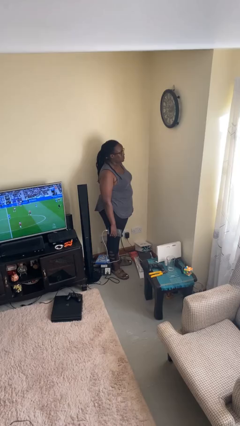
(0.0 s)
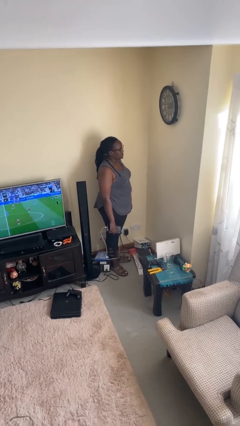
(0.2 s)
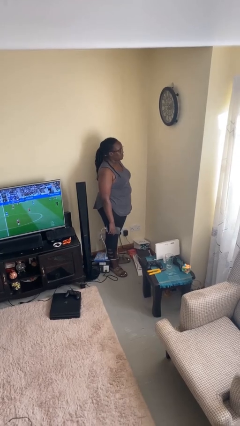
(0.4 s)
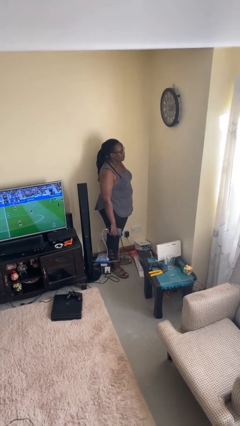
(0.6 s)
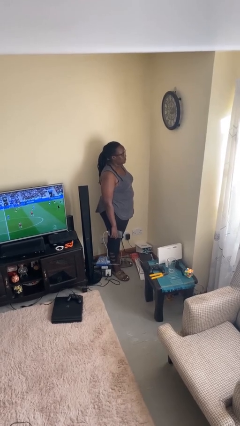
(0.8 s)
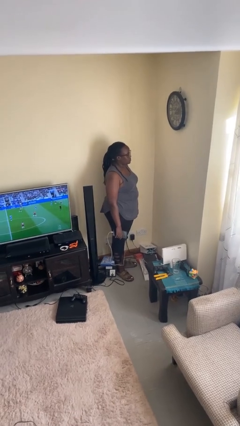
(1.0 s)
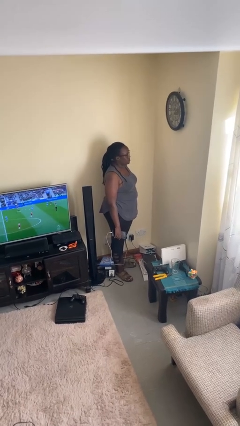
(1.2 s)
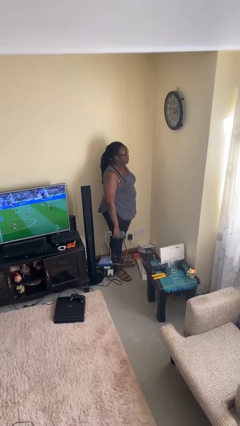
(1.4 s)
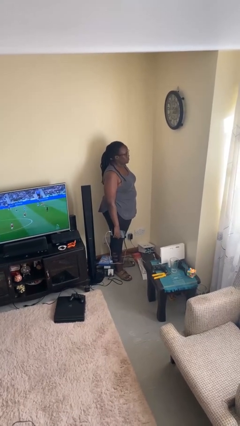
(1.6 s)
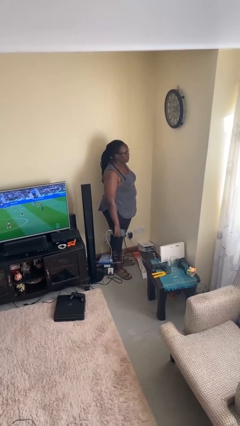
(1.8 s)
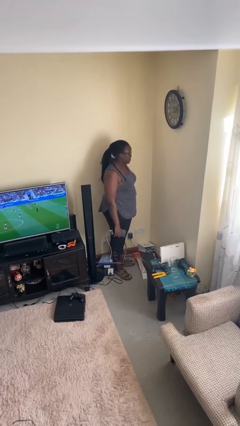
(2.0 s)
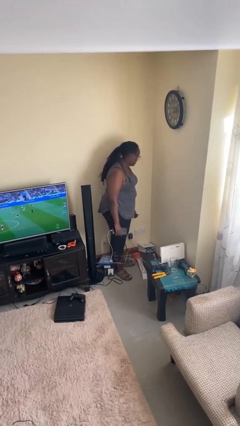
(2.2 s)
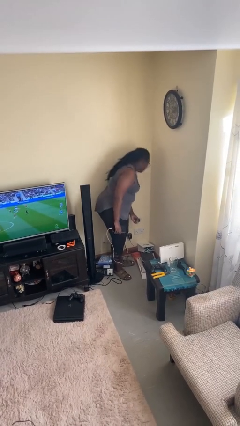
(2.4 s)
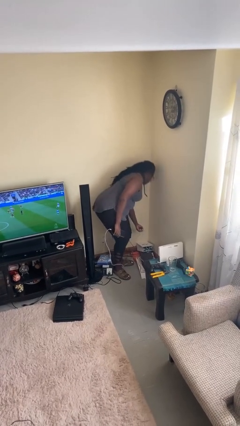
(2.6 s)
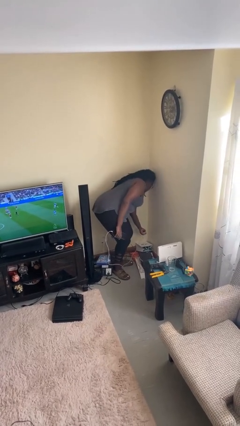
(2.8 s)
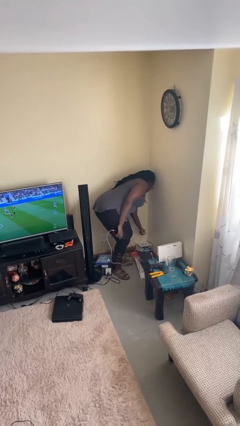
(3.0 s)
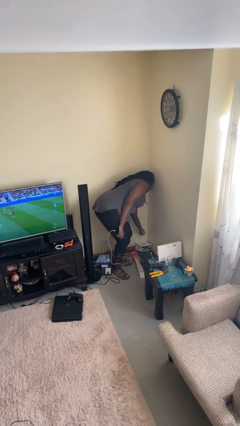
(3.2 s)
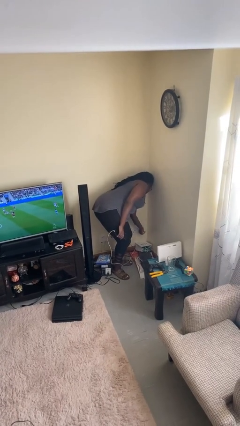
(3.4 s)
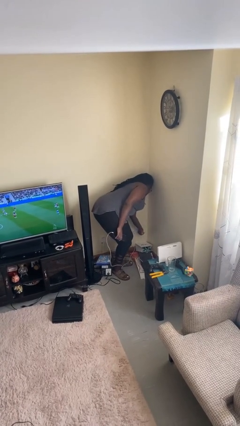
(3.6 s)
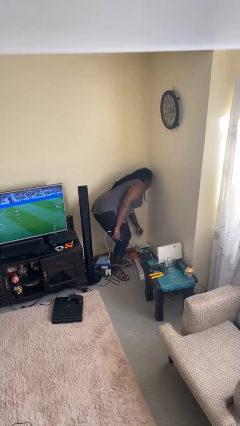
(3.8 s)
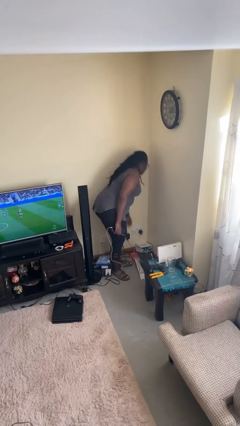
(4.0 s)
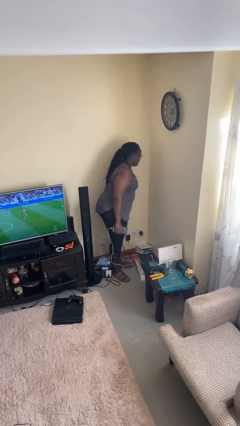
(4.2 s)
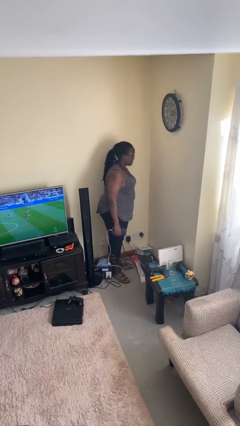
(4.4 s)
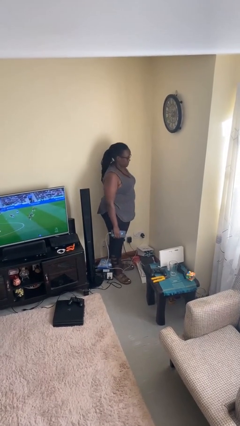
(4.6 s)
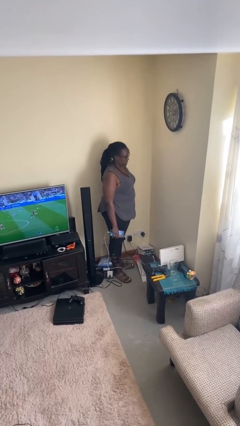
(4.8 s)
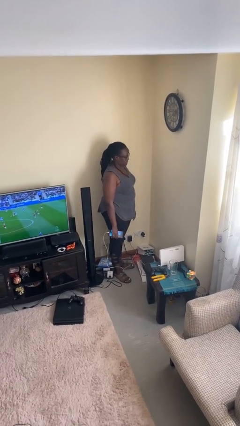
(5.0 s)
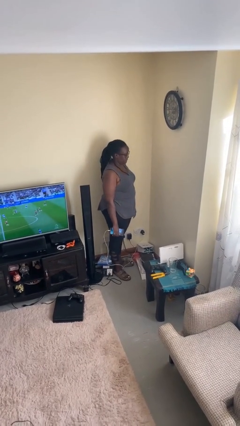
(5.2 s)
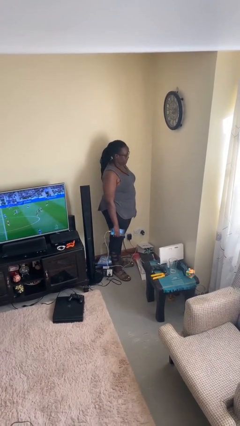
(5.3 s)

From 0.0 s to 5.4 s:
person plugs into electrical socket

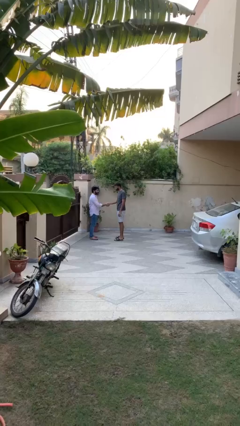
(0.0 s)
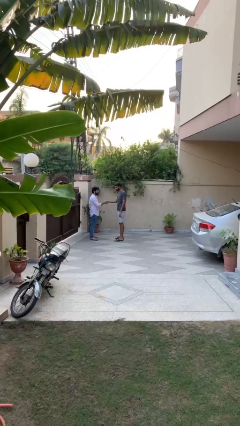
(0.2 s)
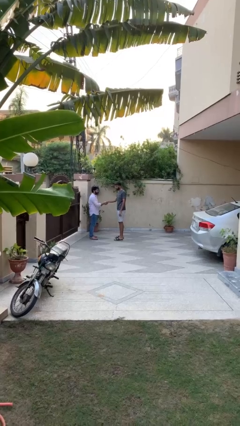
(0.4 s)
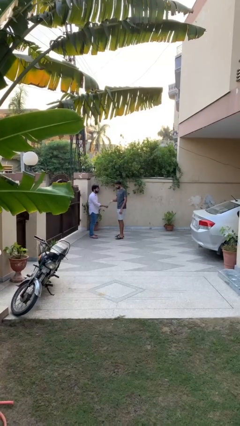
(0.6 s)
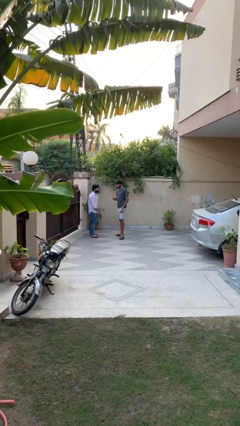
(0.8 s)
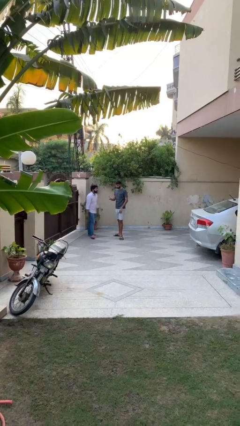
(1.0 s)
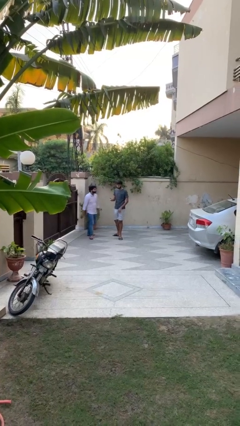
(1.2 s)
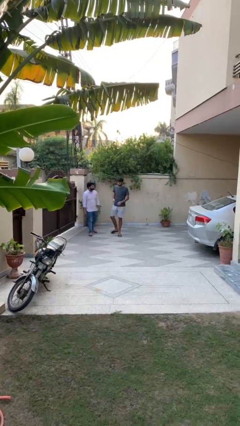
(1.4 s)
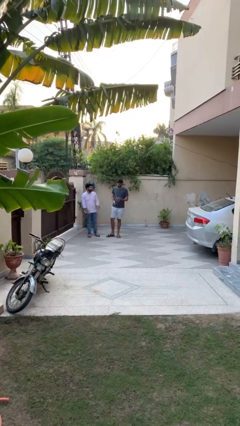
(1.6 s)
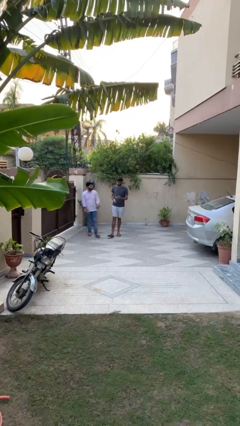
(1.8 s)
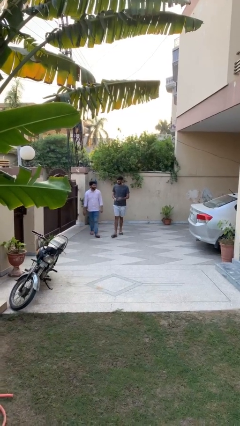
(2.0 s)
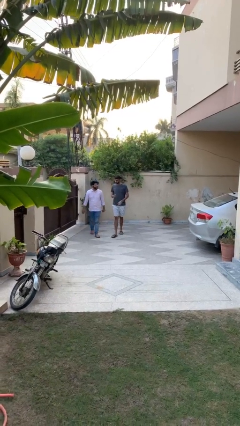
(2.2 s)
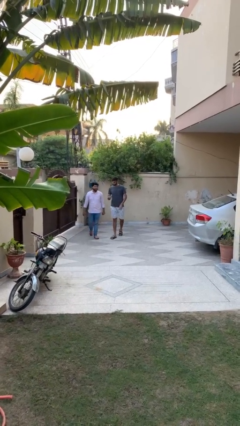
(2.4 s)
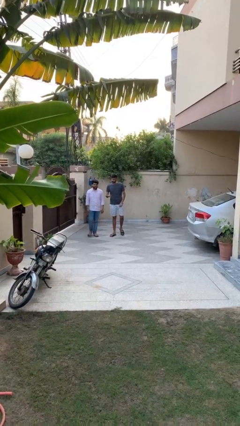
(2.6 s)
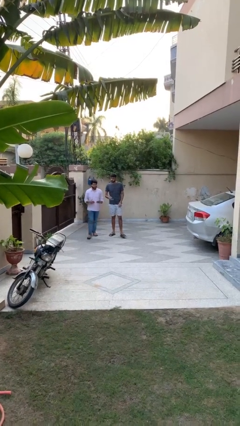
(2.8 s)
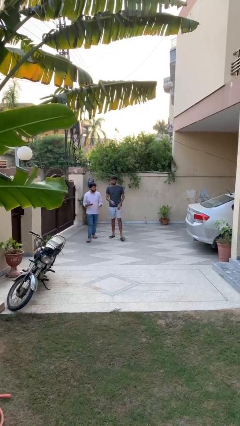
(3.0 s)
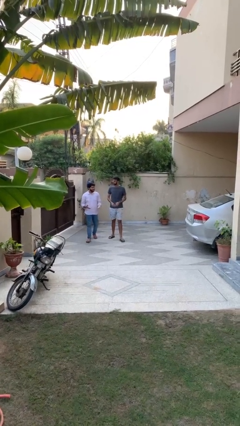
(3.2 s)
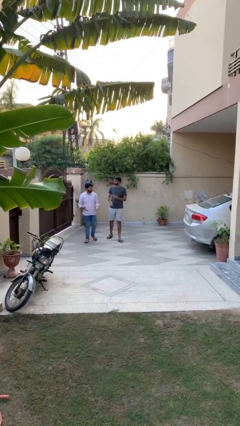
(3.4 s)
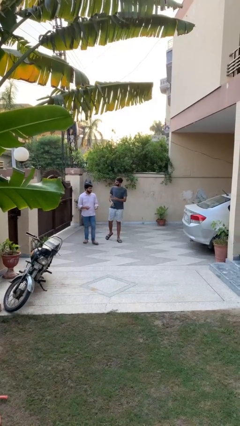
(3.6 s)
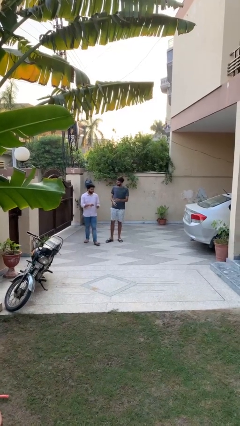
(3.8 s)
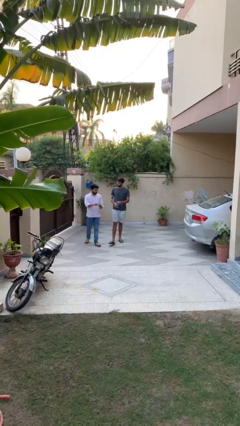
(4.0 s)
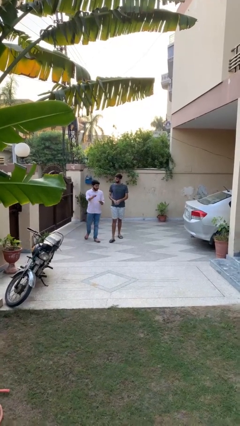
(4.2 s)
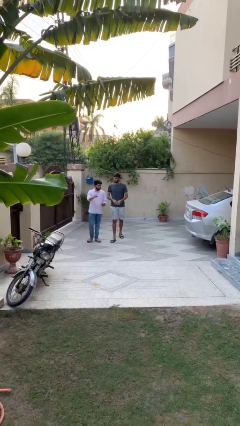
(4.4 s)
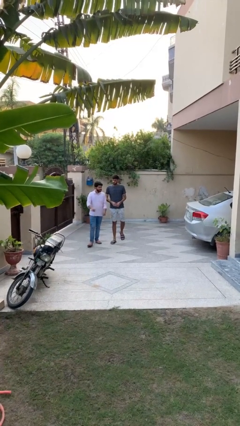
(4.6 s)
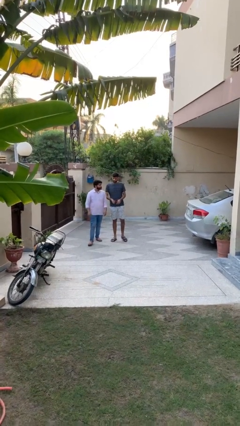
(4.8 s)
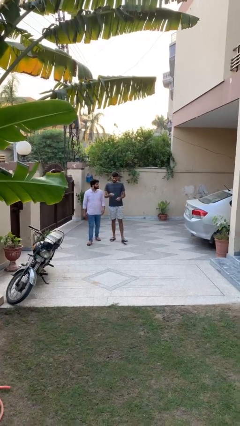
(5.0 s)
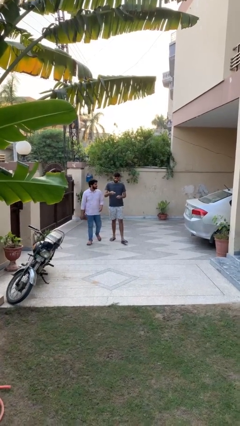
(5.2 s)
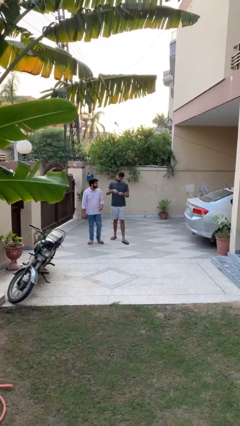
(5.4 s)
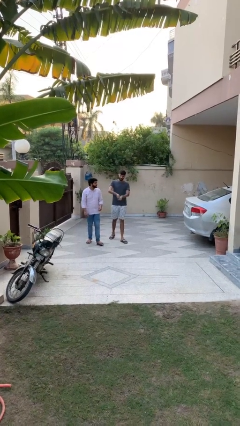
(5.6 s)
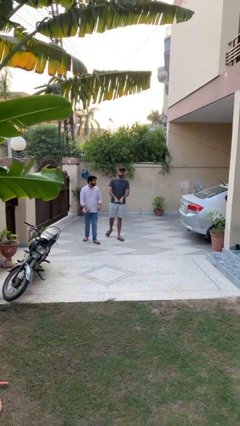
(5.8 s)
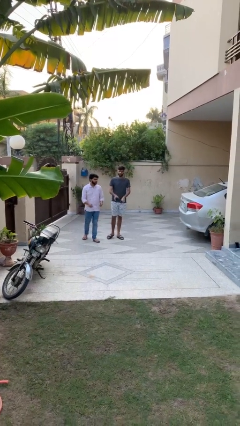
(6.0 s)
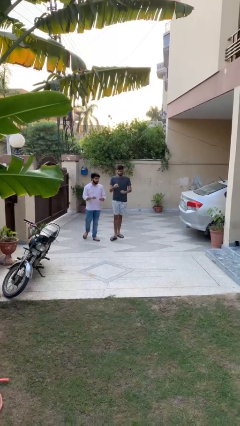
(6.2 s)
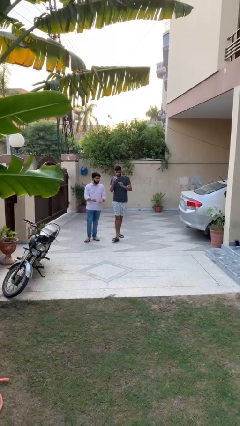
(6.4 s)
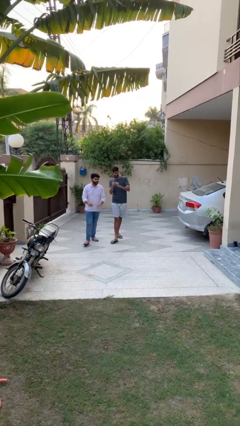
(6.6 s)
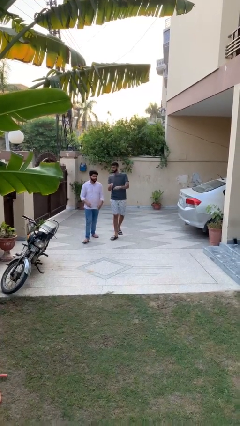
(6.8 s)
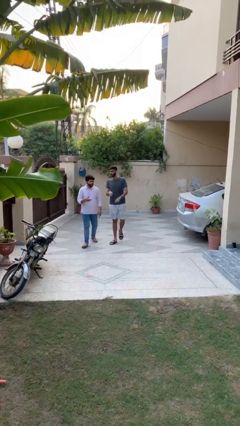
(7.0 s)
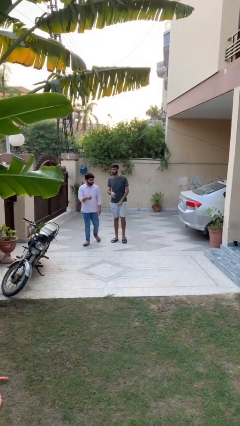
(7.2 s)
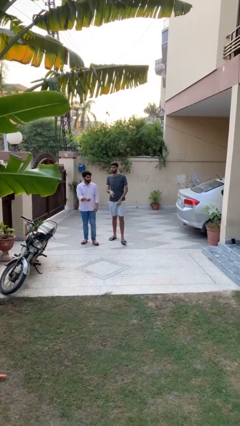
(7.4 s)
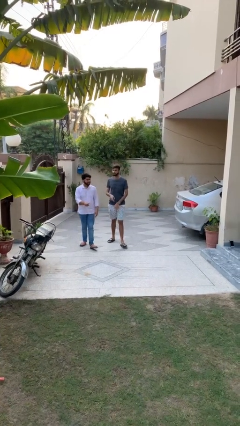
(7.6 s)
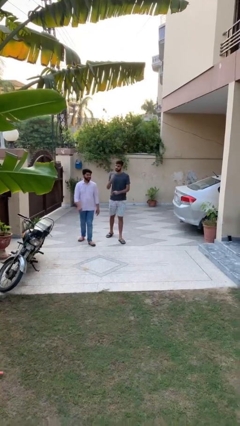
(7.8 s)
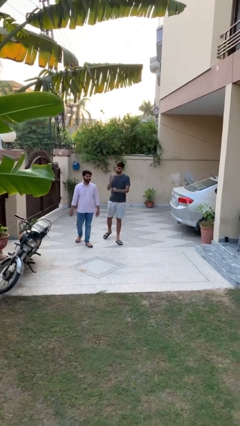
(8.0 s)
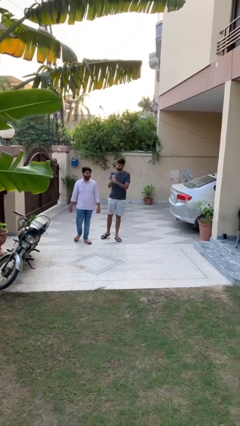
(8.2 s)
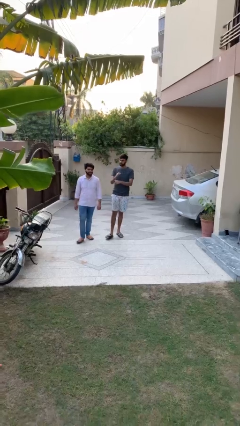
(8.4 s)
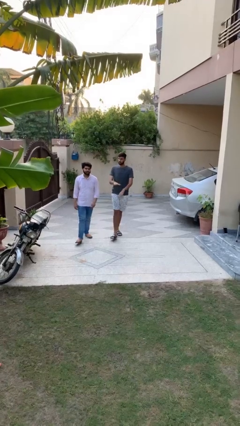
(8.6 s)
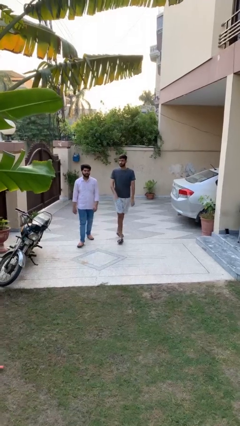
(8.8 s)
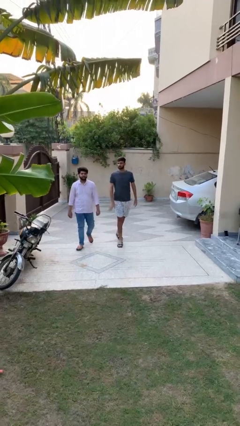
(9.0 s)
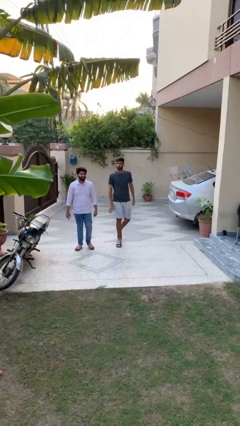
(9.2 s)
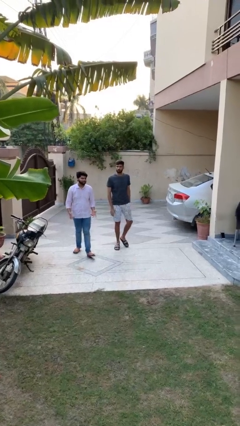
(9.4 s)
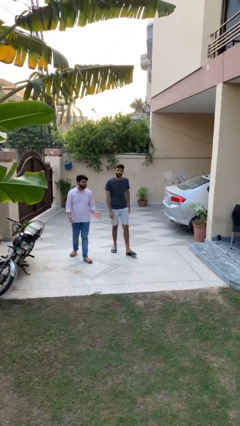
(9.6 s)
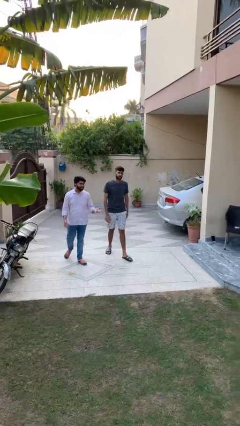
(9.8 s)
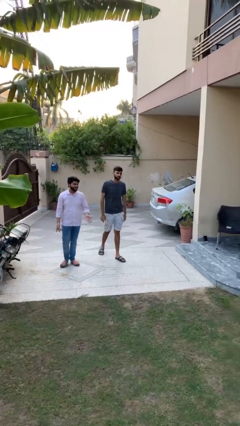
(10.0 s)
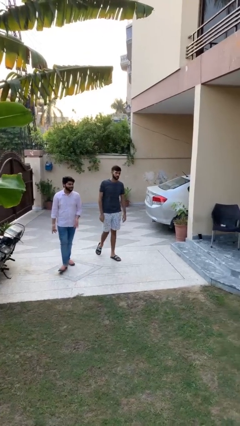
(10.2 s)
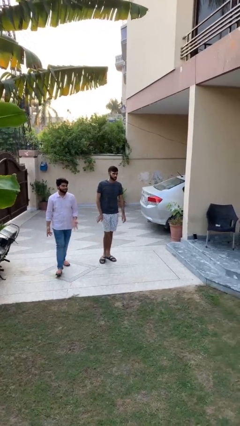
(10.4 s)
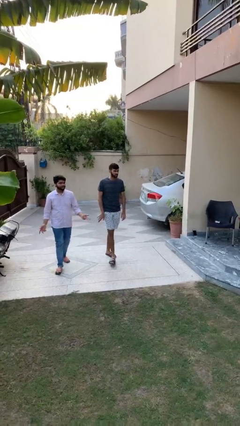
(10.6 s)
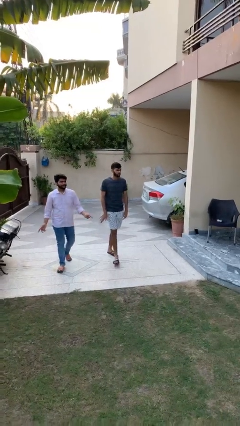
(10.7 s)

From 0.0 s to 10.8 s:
person talks to person

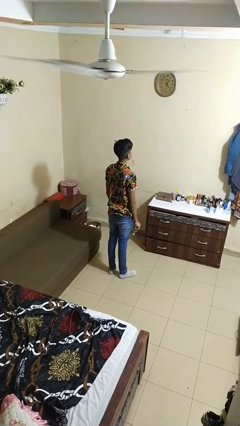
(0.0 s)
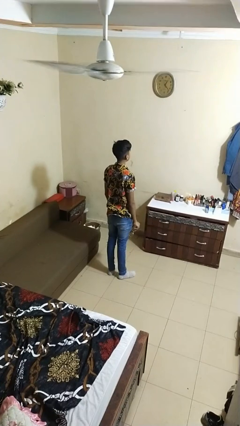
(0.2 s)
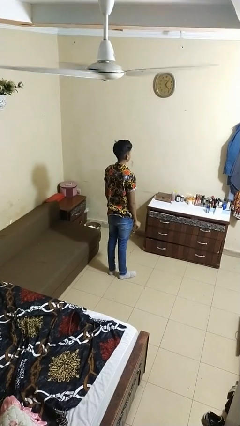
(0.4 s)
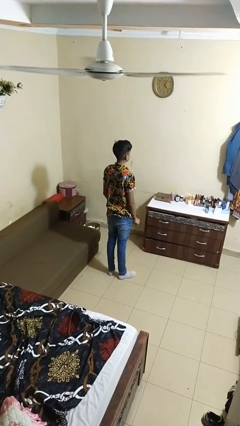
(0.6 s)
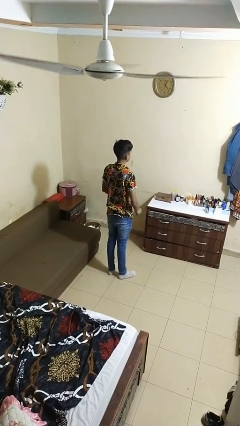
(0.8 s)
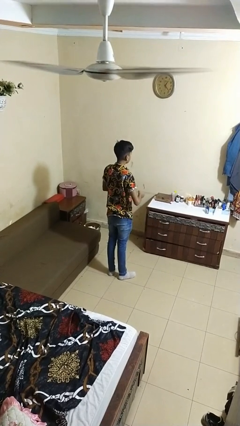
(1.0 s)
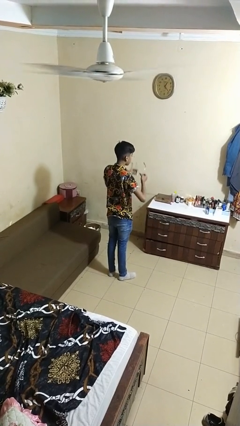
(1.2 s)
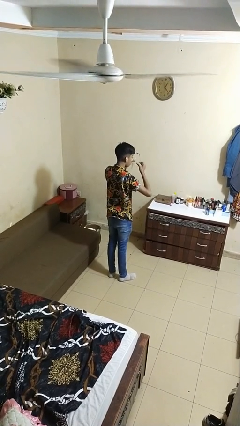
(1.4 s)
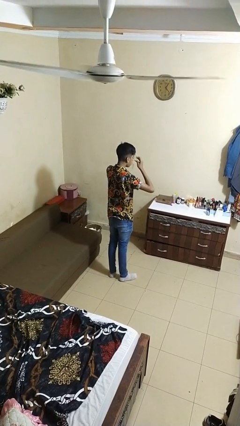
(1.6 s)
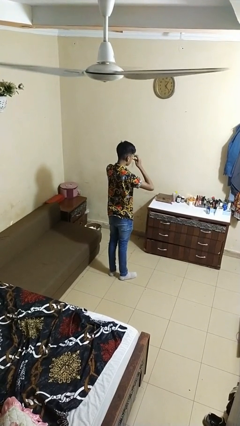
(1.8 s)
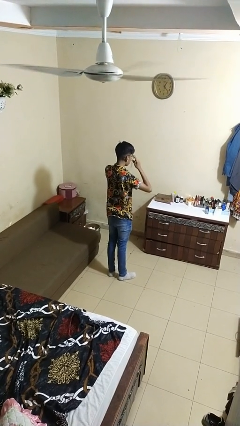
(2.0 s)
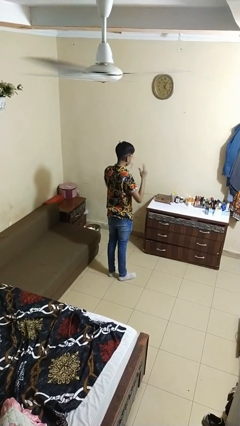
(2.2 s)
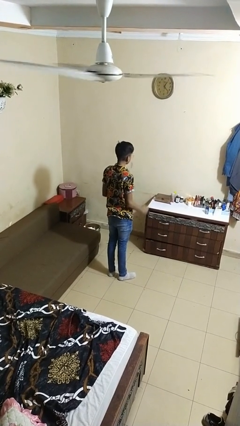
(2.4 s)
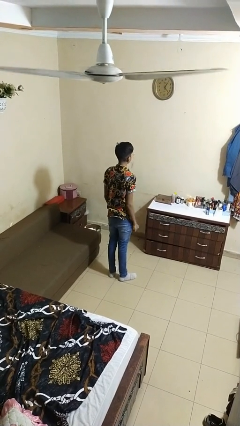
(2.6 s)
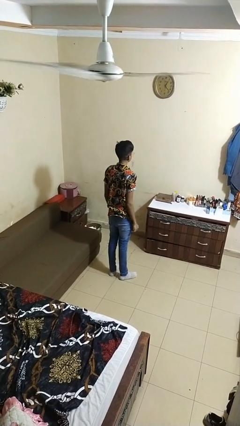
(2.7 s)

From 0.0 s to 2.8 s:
person puts on glasses
